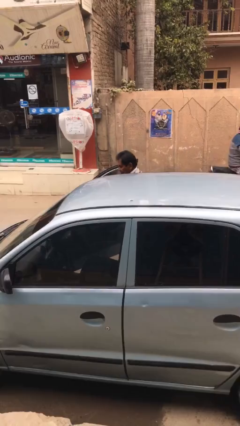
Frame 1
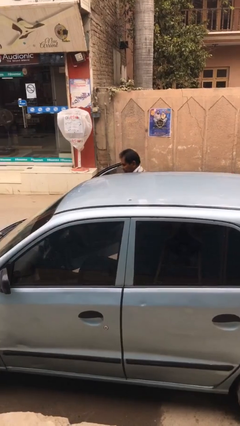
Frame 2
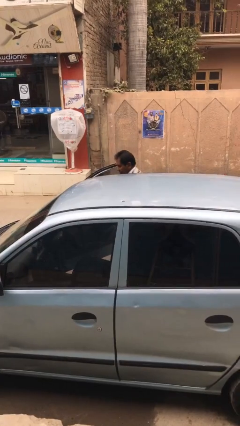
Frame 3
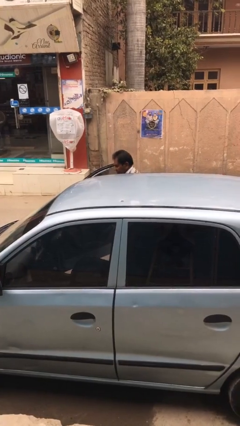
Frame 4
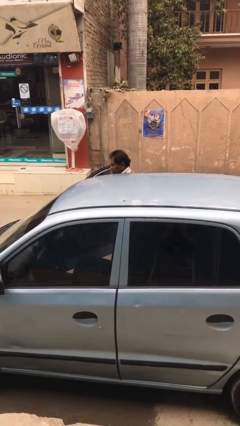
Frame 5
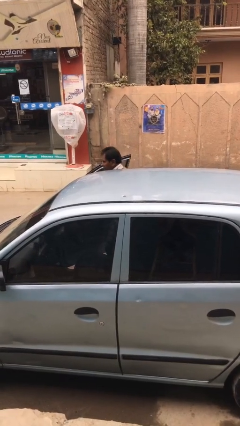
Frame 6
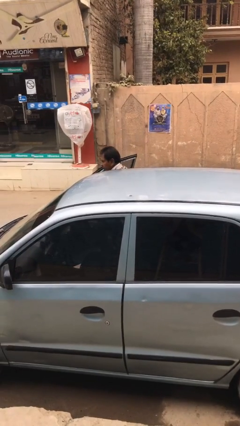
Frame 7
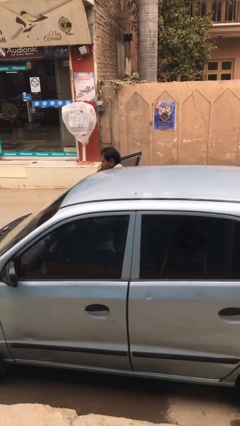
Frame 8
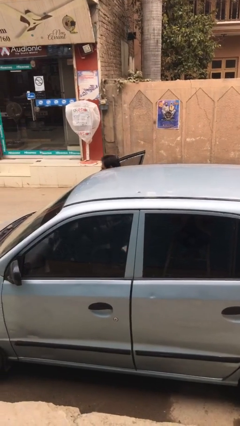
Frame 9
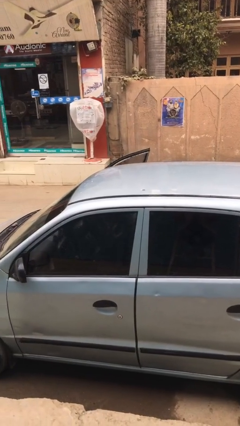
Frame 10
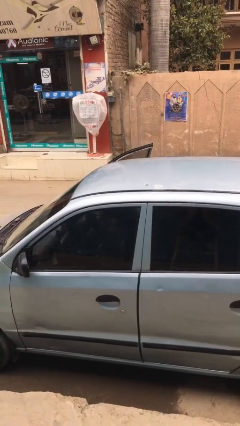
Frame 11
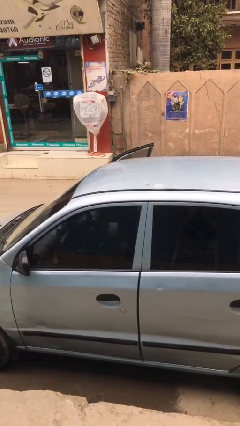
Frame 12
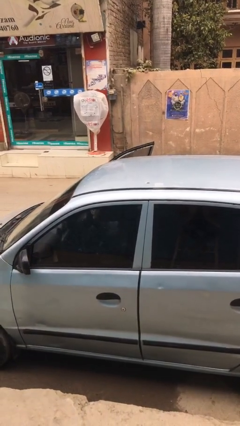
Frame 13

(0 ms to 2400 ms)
person enters car

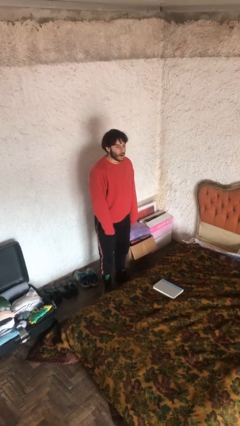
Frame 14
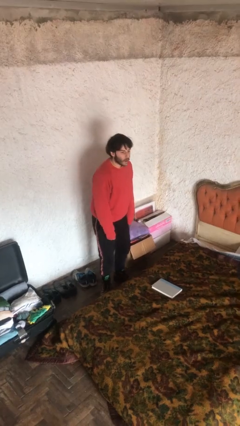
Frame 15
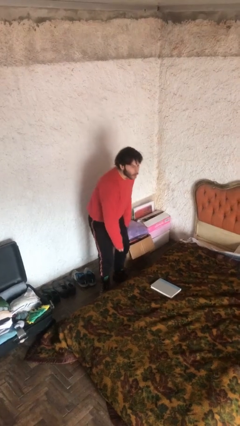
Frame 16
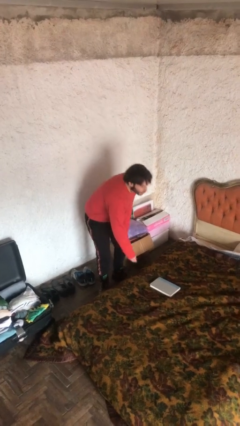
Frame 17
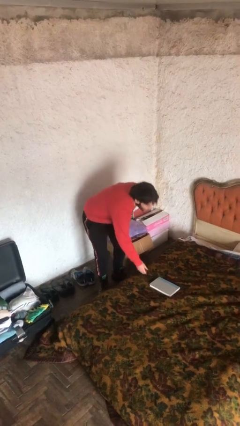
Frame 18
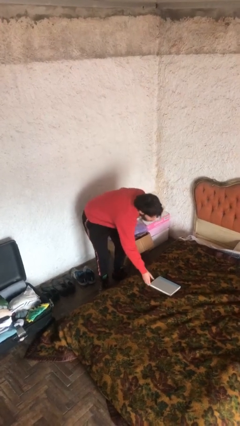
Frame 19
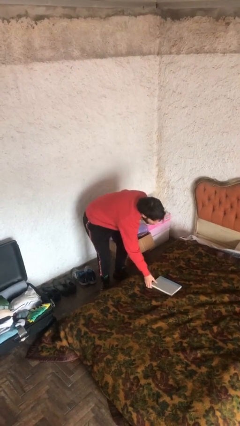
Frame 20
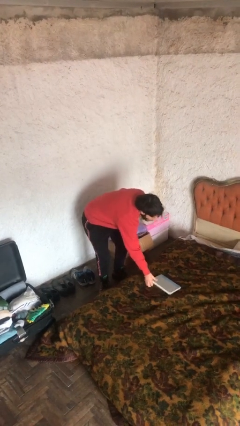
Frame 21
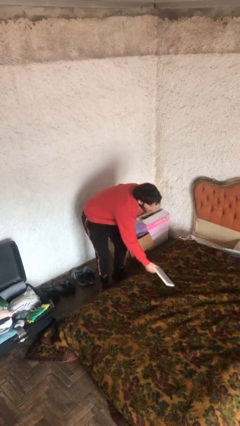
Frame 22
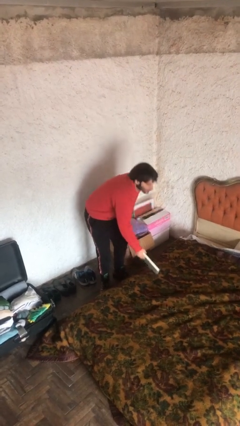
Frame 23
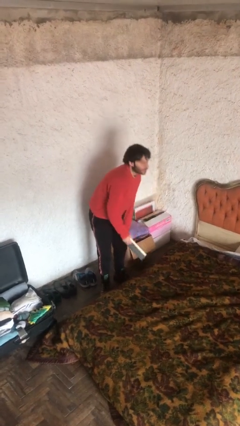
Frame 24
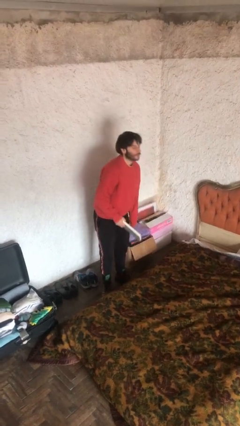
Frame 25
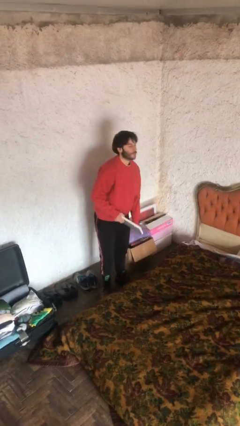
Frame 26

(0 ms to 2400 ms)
person picks up object from bed

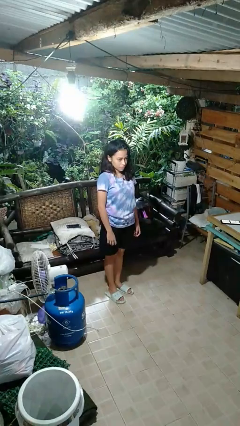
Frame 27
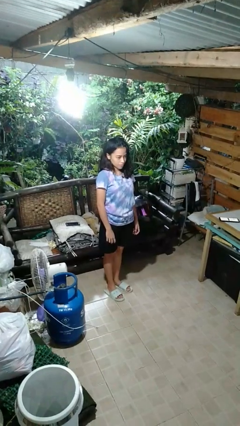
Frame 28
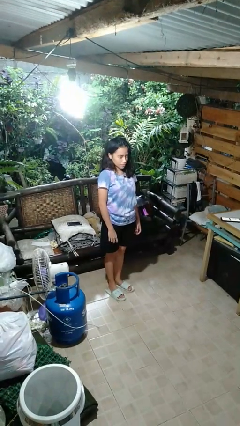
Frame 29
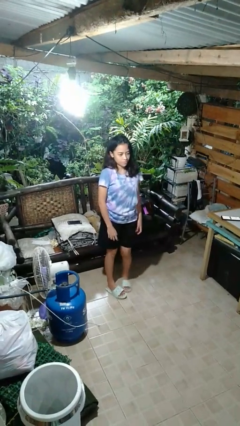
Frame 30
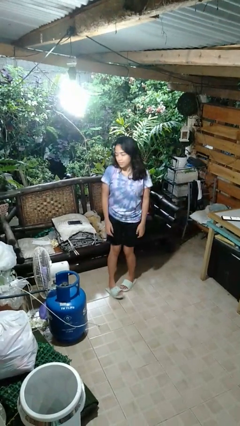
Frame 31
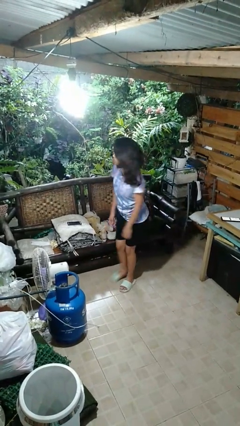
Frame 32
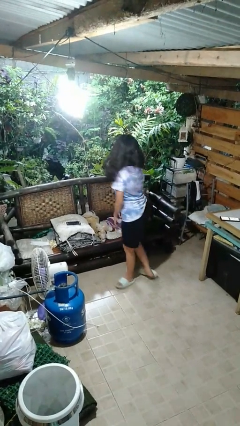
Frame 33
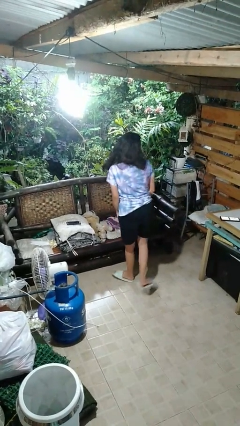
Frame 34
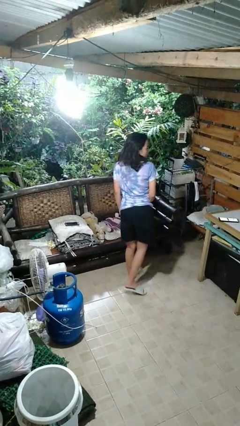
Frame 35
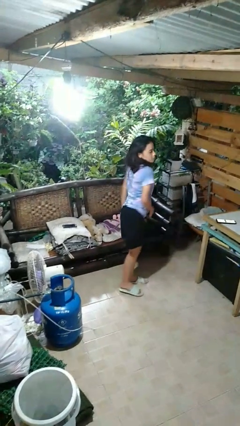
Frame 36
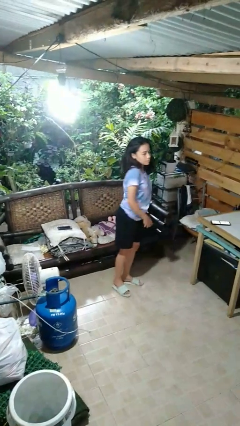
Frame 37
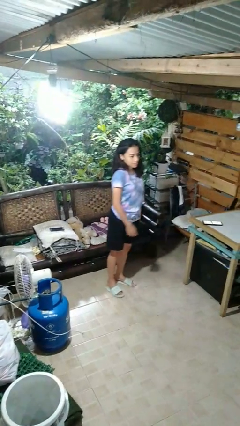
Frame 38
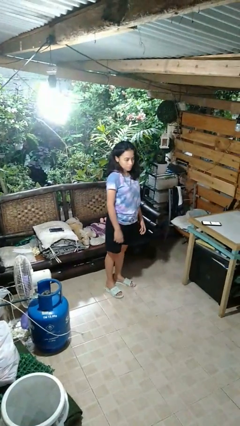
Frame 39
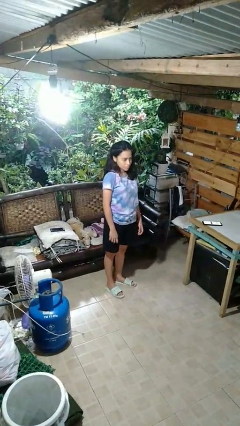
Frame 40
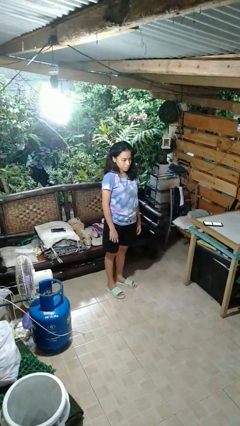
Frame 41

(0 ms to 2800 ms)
person twirls

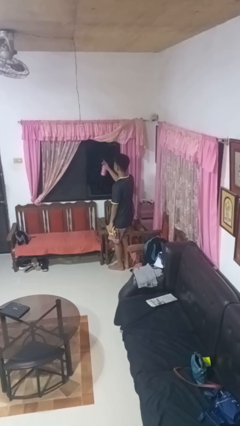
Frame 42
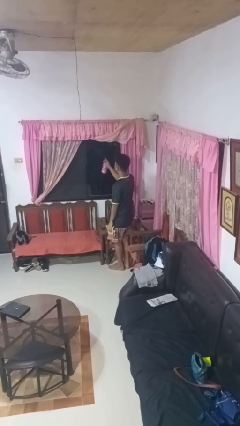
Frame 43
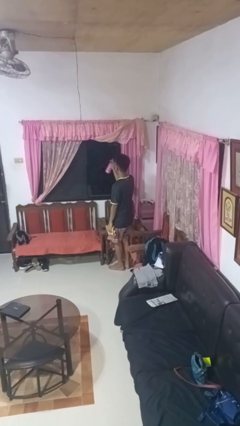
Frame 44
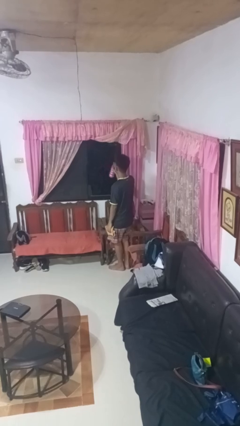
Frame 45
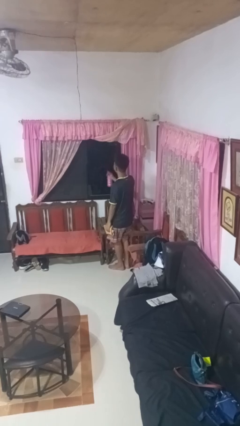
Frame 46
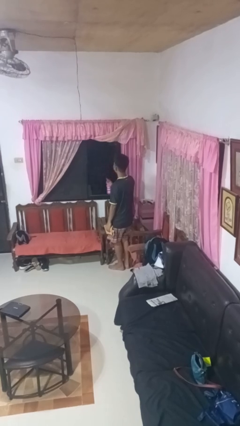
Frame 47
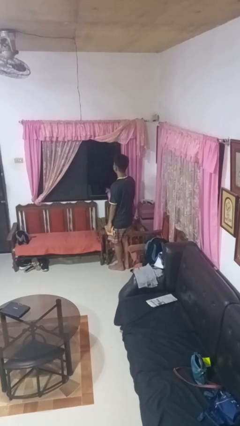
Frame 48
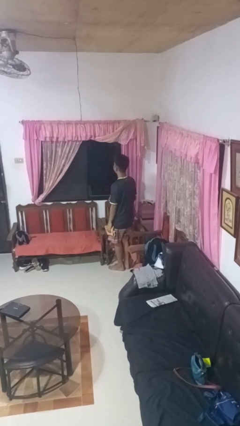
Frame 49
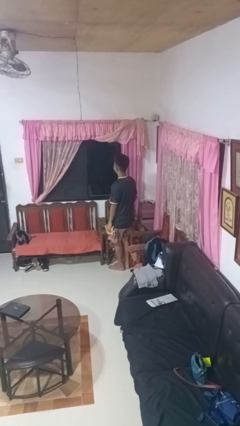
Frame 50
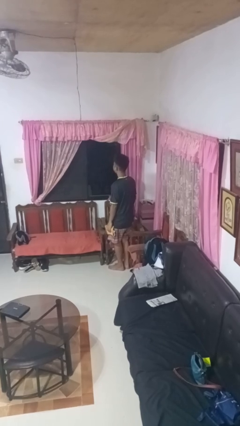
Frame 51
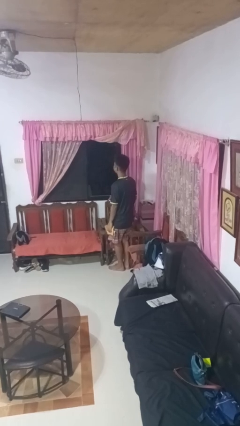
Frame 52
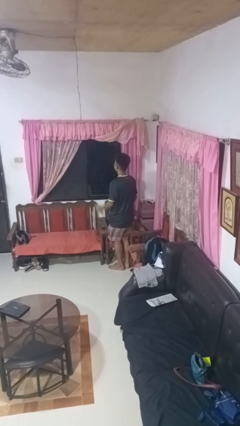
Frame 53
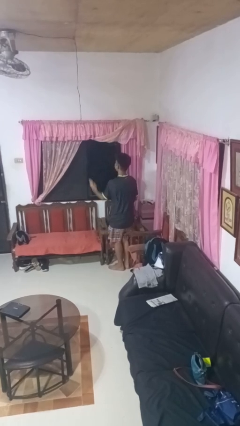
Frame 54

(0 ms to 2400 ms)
person sprays from bottle

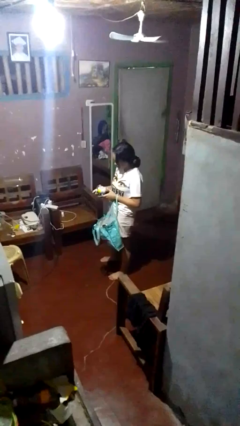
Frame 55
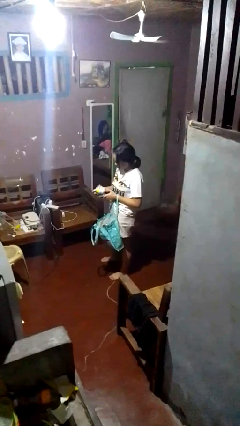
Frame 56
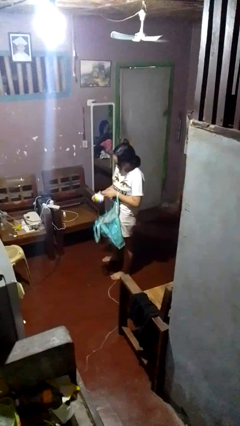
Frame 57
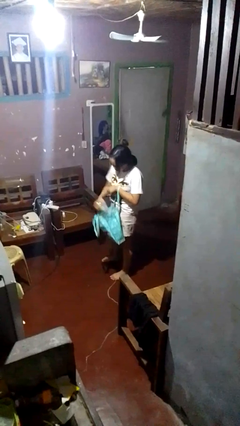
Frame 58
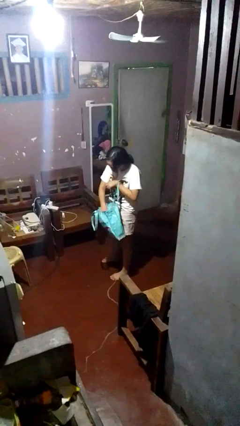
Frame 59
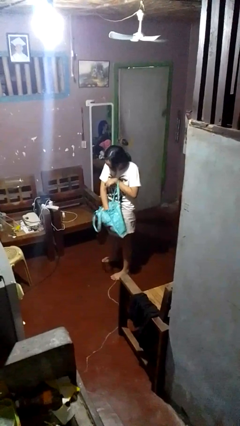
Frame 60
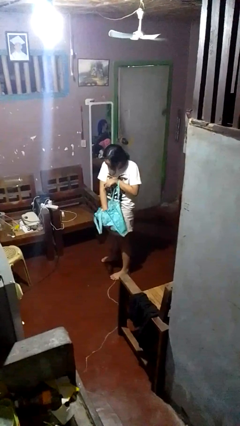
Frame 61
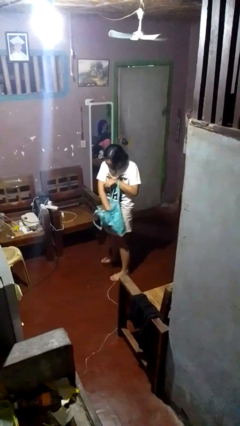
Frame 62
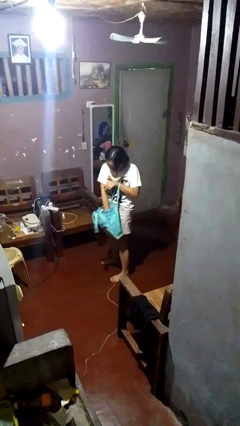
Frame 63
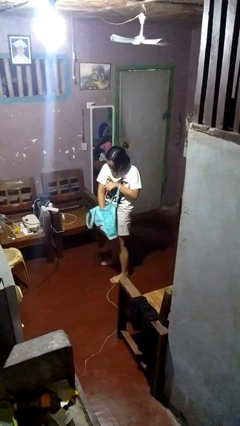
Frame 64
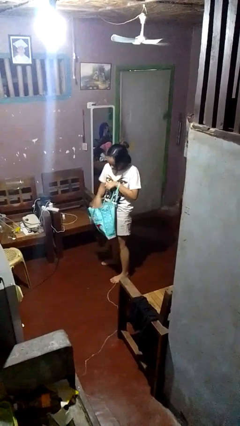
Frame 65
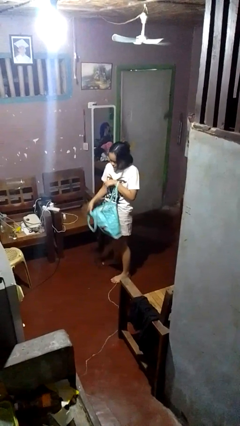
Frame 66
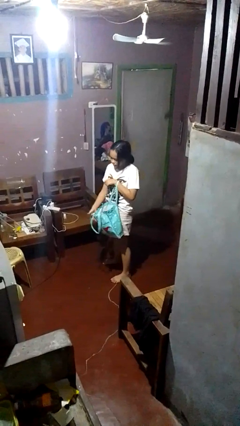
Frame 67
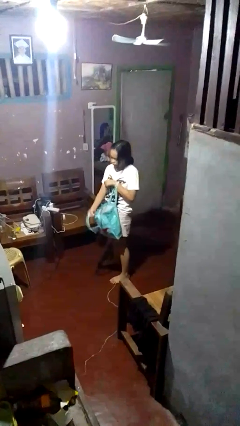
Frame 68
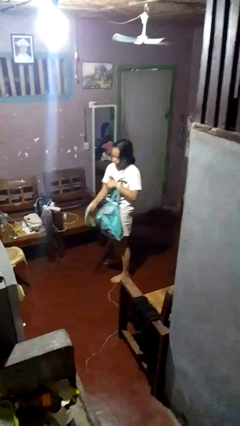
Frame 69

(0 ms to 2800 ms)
person puts object into bag

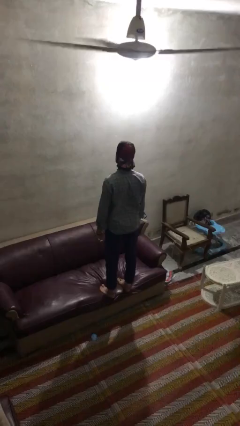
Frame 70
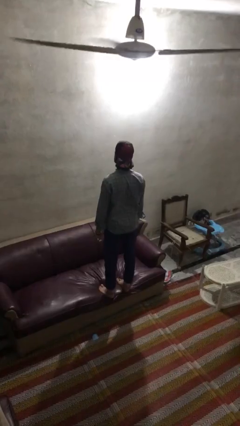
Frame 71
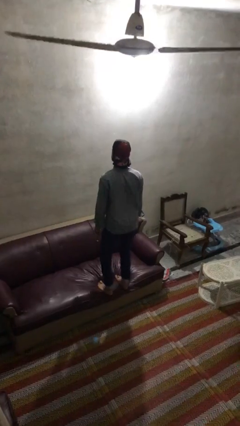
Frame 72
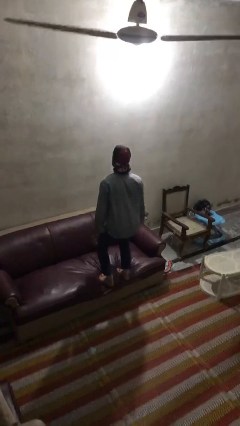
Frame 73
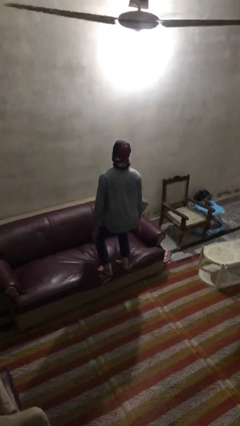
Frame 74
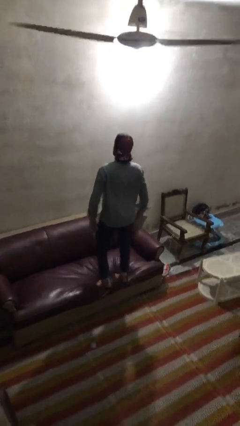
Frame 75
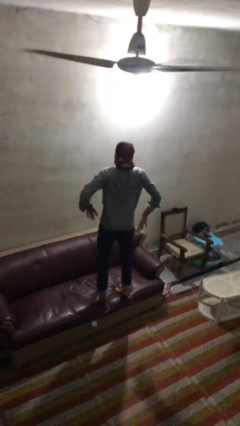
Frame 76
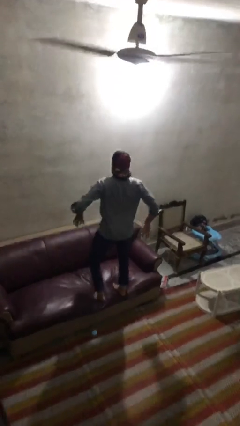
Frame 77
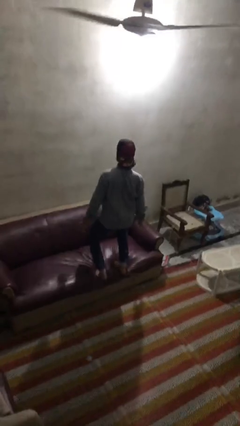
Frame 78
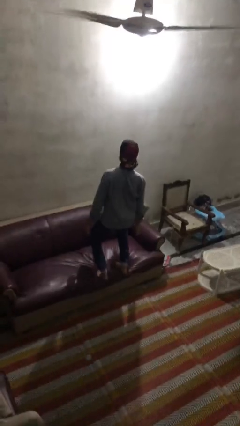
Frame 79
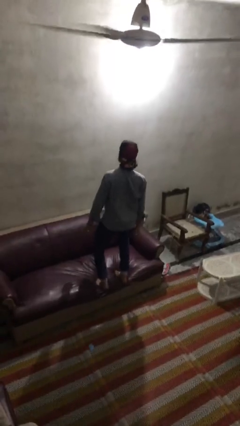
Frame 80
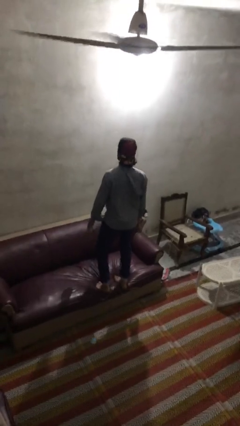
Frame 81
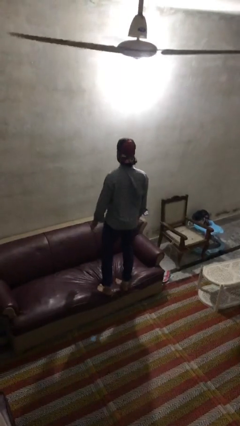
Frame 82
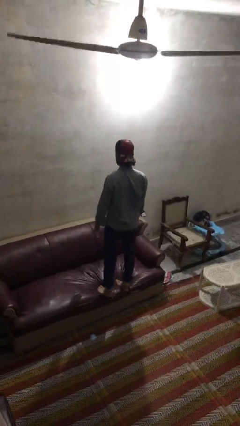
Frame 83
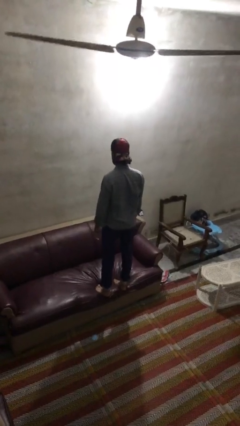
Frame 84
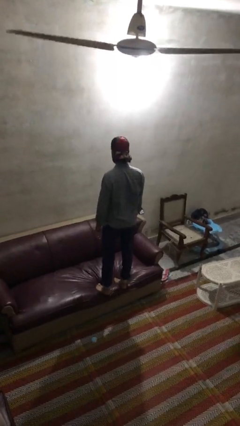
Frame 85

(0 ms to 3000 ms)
person jumps on couch

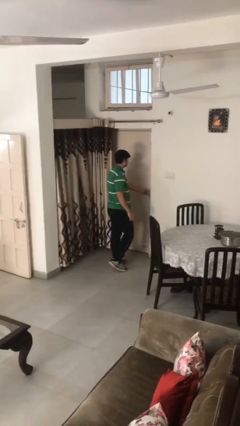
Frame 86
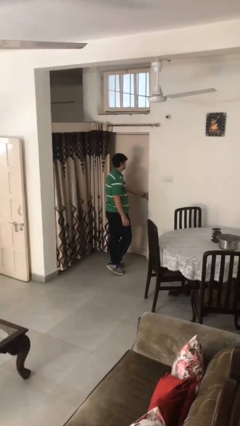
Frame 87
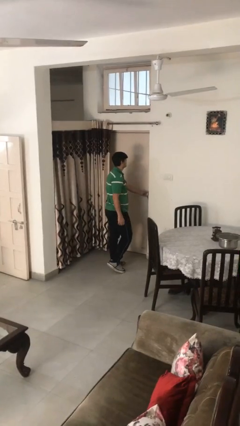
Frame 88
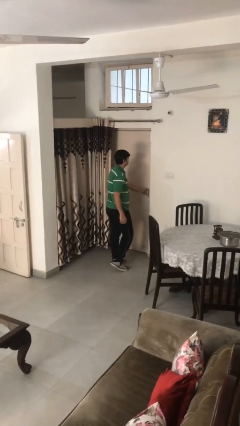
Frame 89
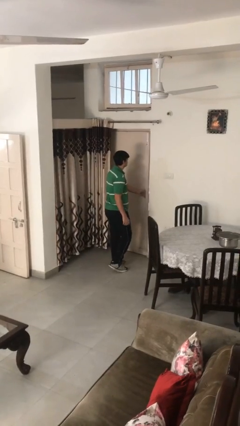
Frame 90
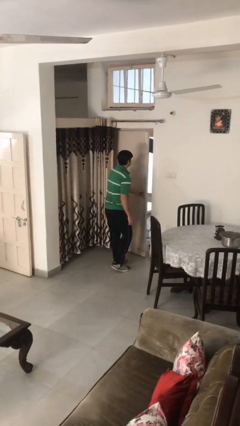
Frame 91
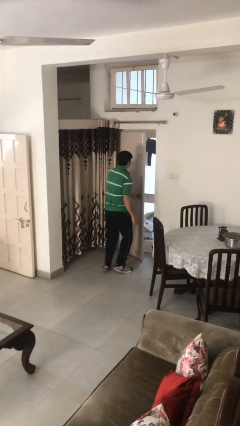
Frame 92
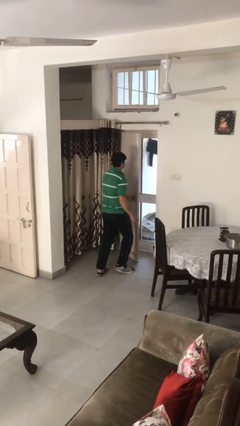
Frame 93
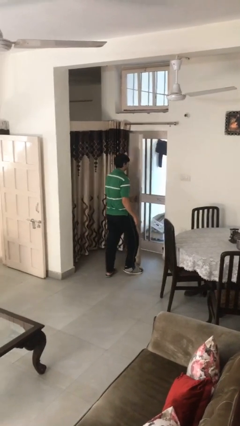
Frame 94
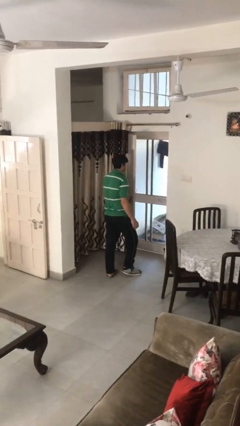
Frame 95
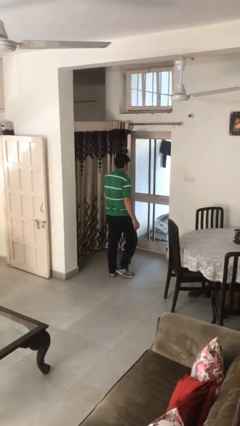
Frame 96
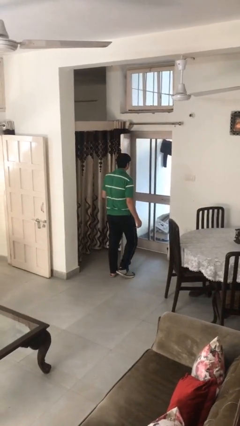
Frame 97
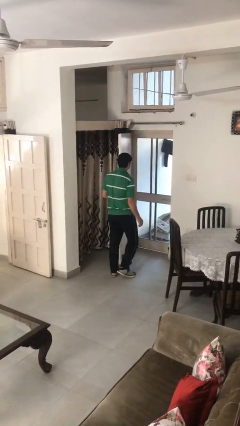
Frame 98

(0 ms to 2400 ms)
person opens facility door
